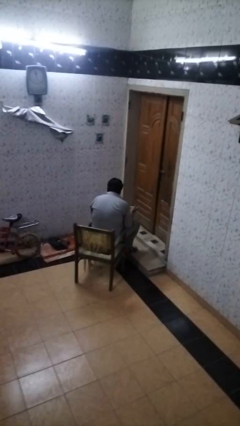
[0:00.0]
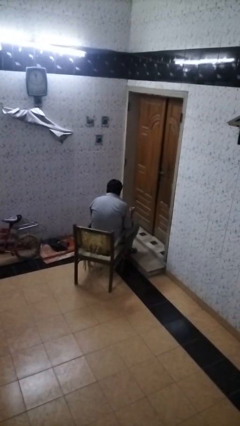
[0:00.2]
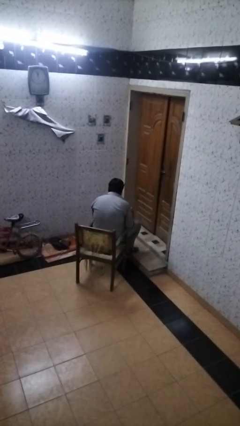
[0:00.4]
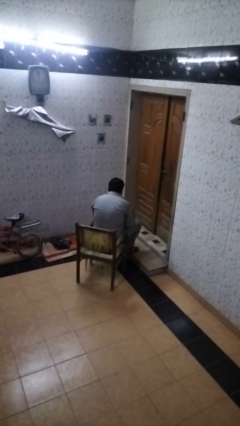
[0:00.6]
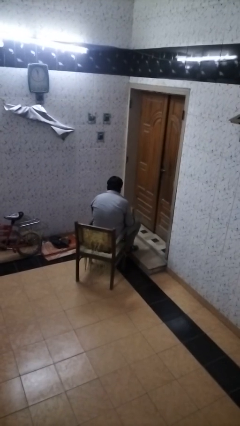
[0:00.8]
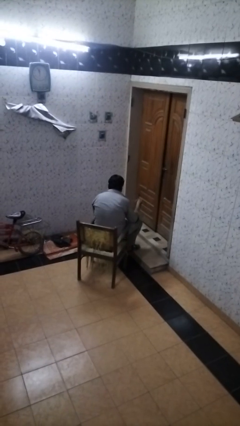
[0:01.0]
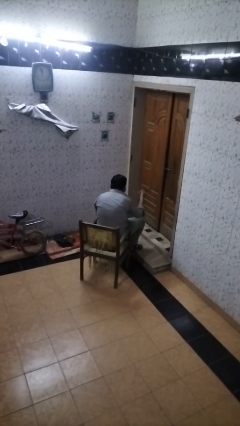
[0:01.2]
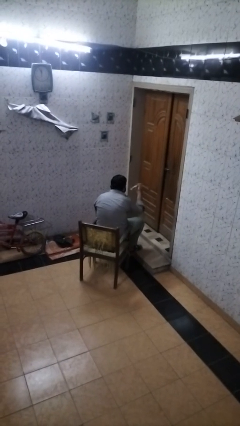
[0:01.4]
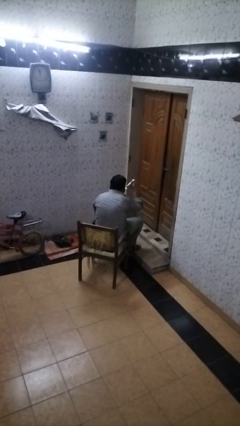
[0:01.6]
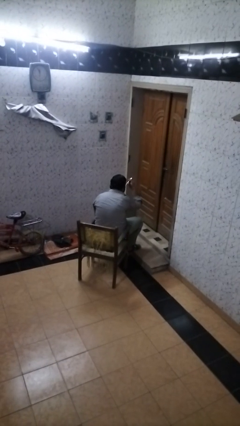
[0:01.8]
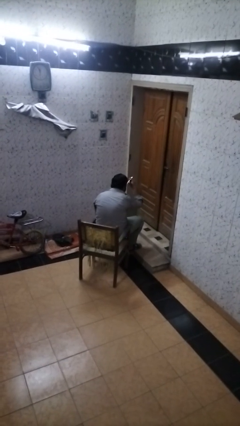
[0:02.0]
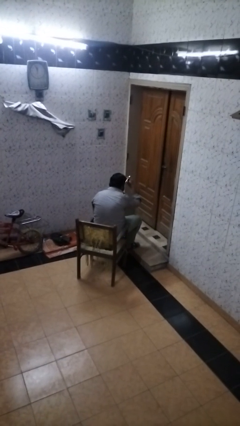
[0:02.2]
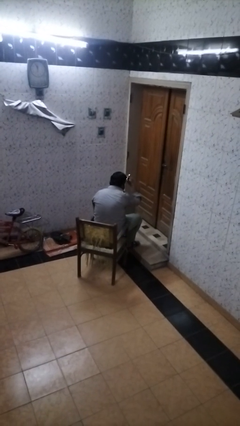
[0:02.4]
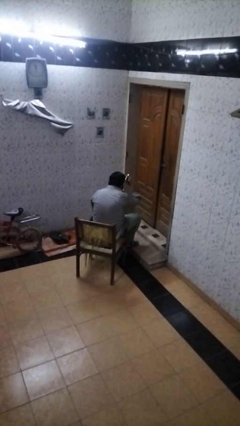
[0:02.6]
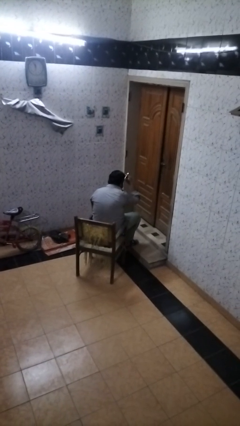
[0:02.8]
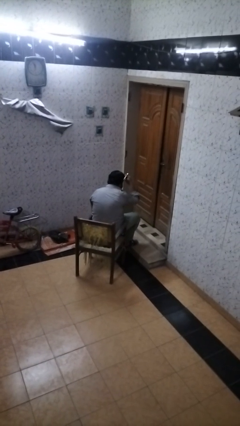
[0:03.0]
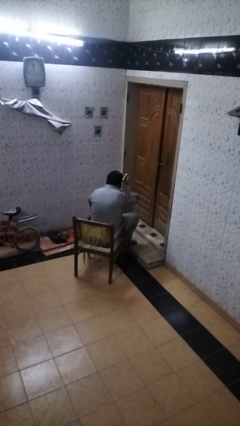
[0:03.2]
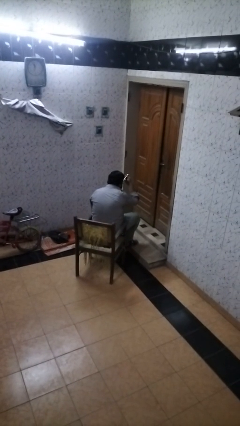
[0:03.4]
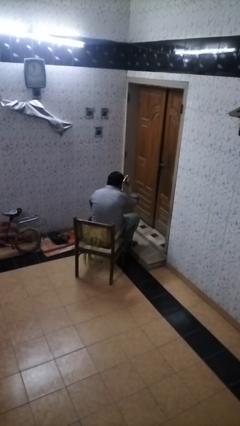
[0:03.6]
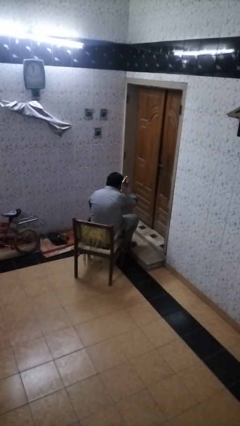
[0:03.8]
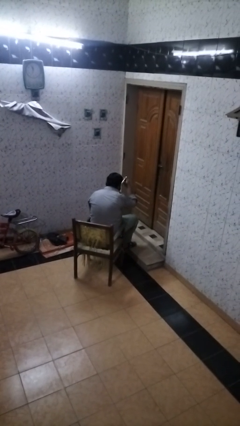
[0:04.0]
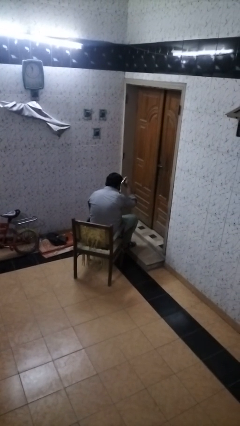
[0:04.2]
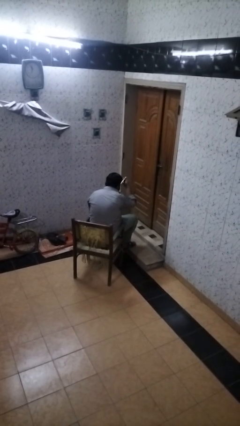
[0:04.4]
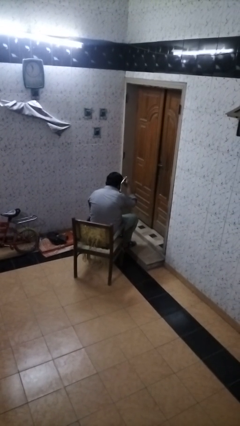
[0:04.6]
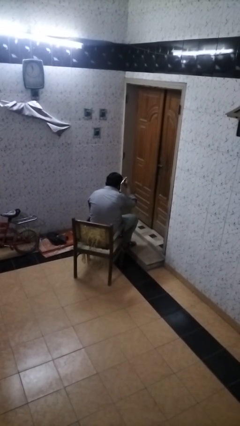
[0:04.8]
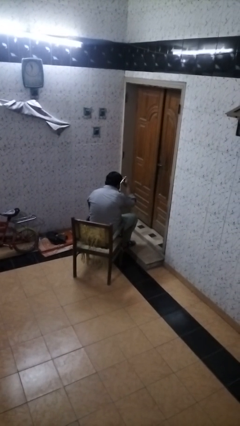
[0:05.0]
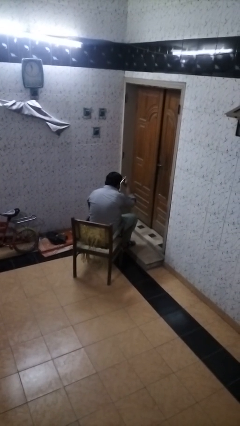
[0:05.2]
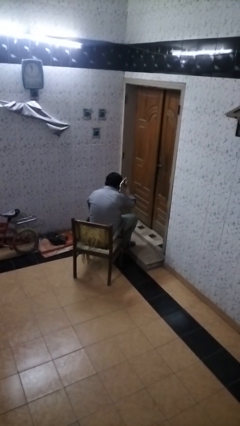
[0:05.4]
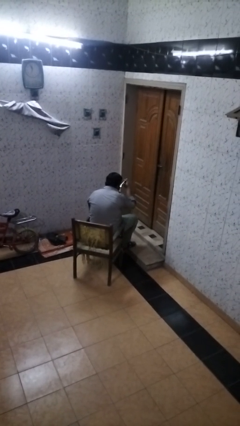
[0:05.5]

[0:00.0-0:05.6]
person eats with utensil

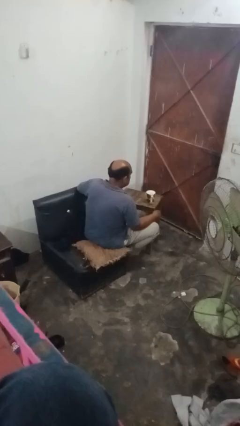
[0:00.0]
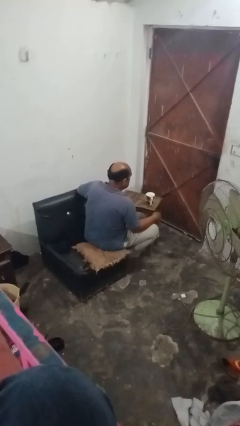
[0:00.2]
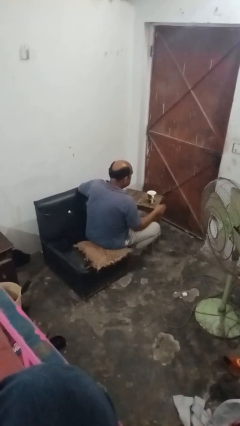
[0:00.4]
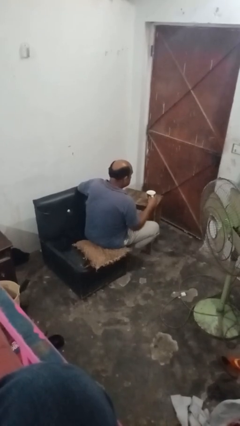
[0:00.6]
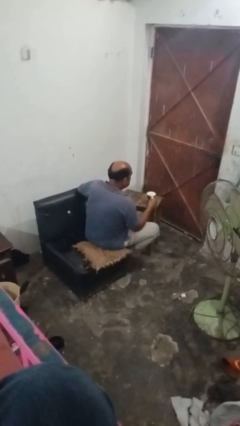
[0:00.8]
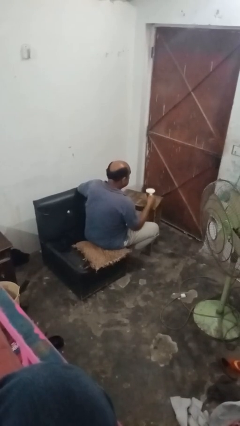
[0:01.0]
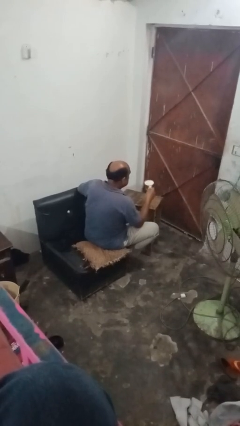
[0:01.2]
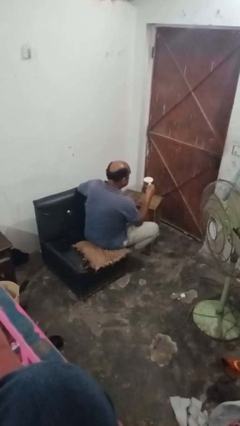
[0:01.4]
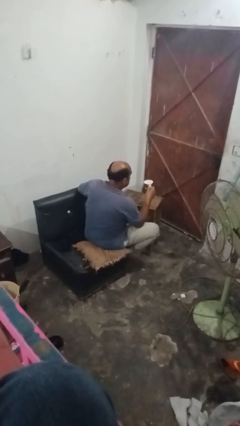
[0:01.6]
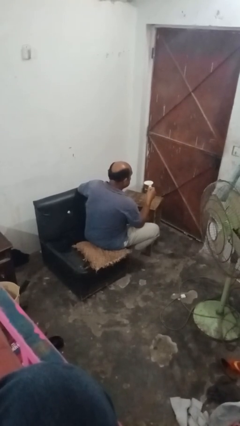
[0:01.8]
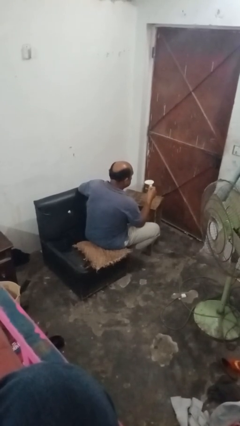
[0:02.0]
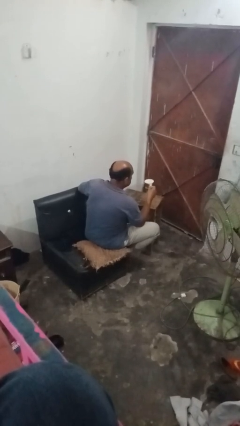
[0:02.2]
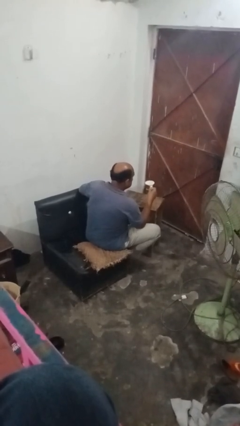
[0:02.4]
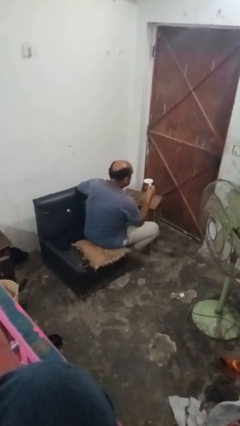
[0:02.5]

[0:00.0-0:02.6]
person picks up object from table

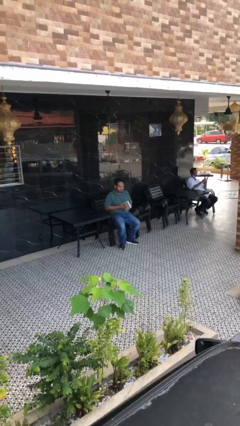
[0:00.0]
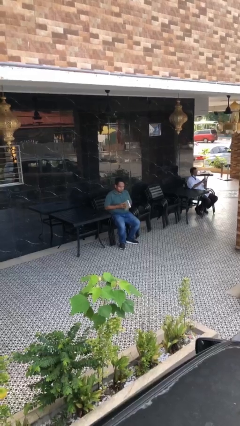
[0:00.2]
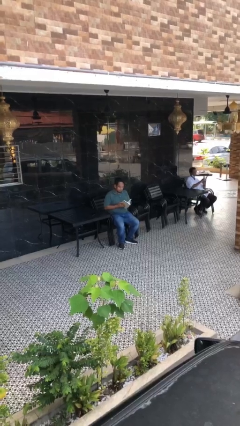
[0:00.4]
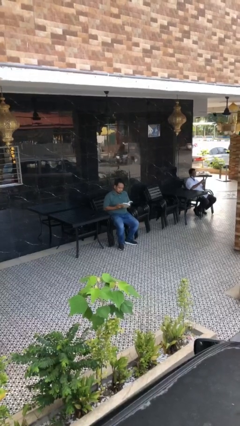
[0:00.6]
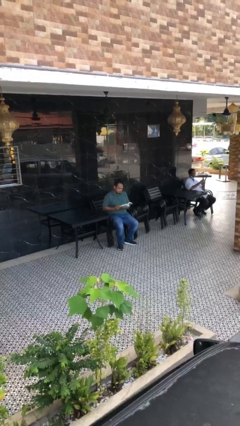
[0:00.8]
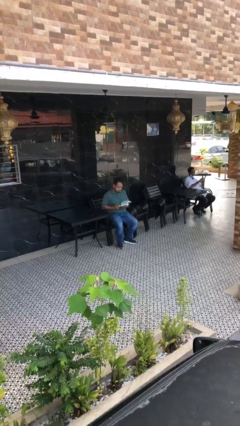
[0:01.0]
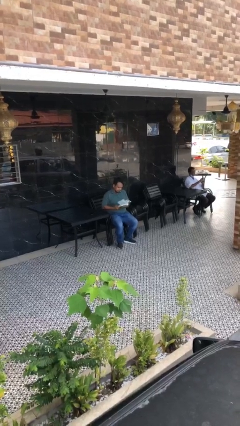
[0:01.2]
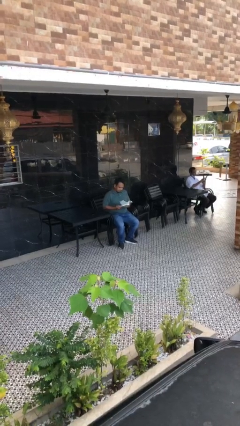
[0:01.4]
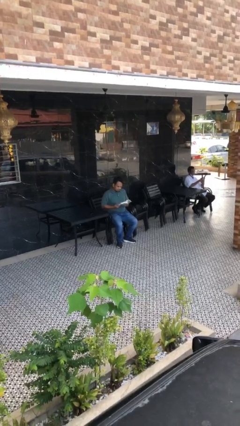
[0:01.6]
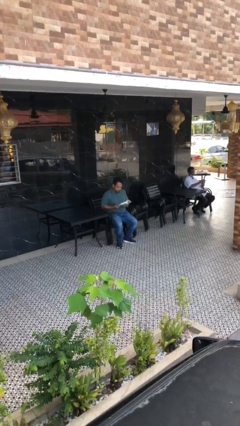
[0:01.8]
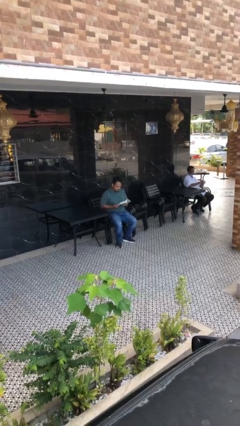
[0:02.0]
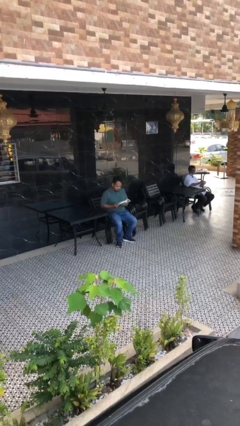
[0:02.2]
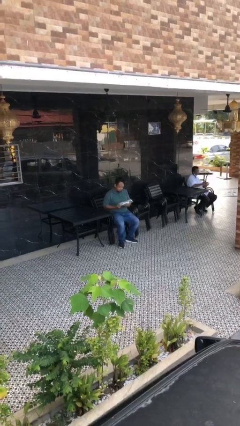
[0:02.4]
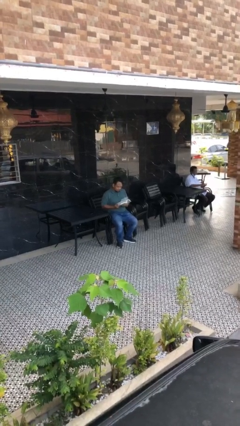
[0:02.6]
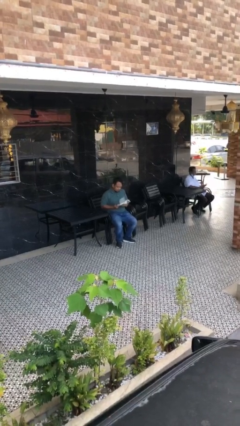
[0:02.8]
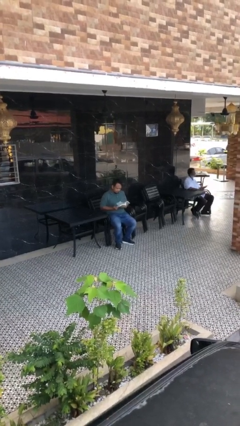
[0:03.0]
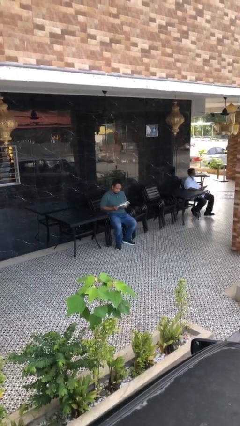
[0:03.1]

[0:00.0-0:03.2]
person reads document

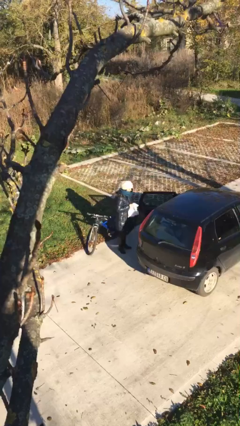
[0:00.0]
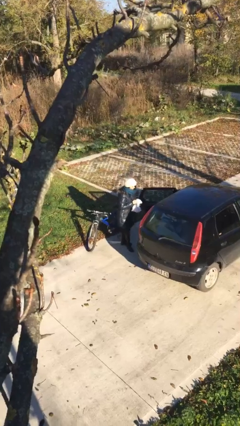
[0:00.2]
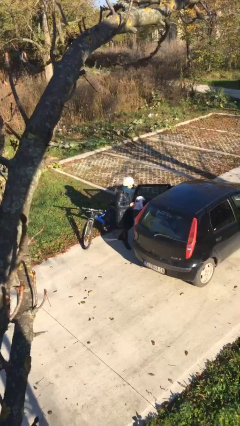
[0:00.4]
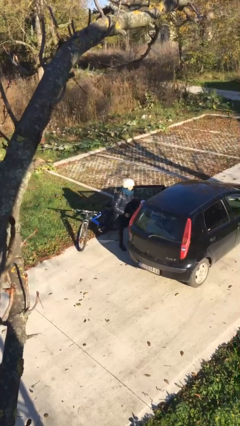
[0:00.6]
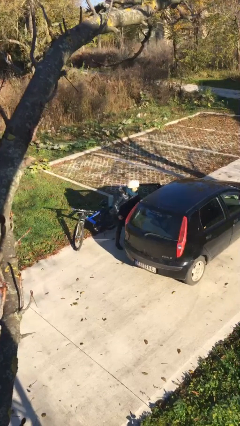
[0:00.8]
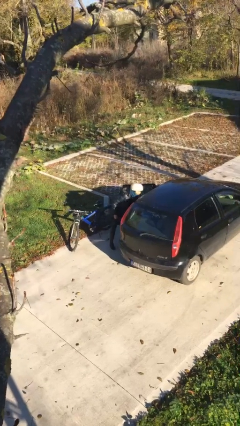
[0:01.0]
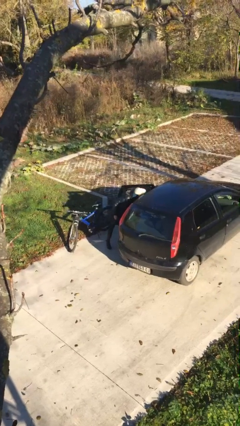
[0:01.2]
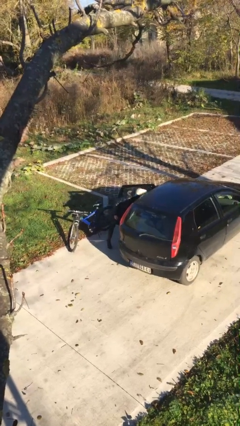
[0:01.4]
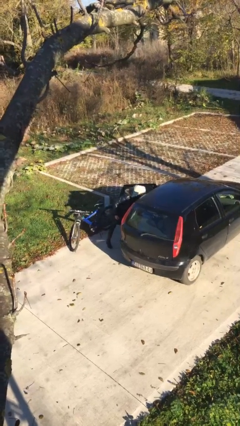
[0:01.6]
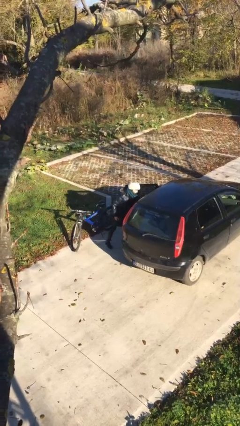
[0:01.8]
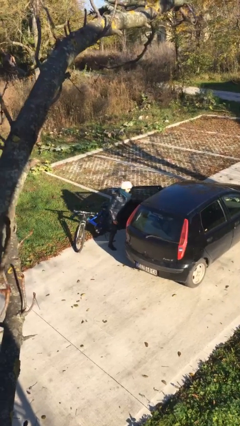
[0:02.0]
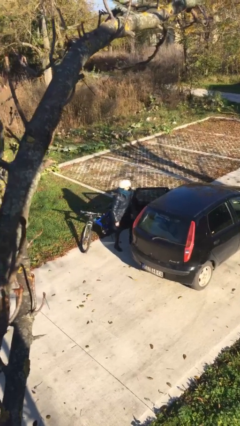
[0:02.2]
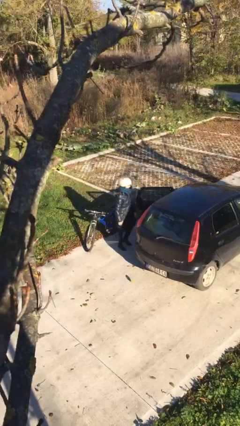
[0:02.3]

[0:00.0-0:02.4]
person loads car

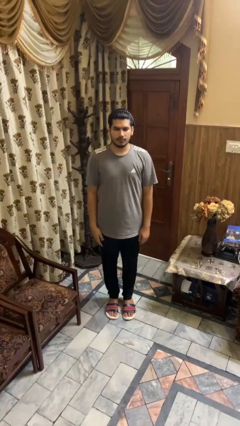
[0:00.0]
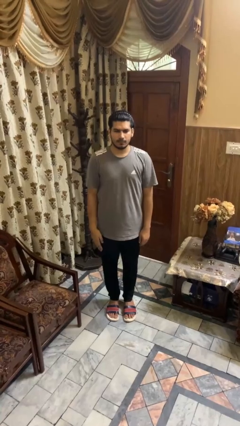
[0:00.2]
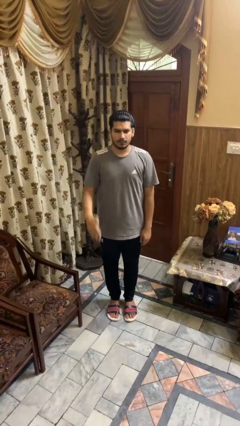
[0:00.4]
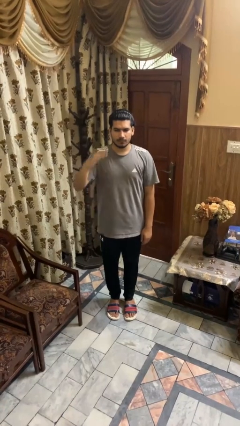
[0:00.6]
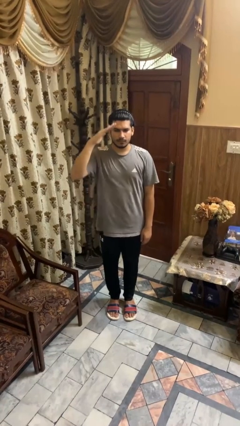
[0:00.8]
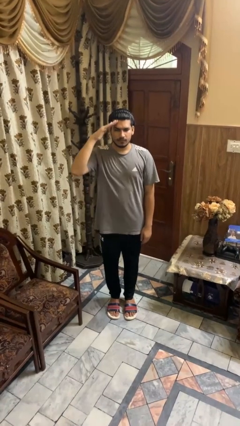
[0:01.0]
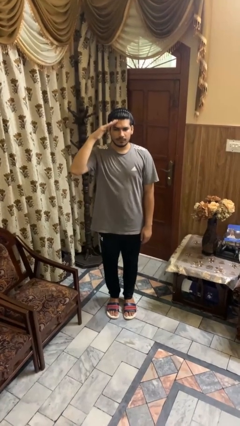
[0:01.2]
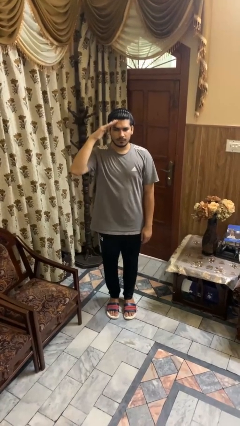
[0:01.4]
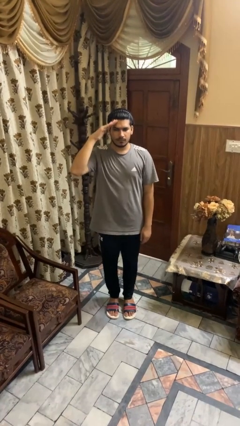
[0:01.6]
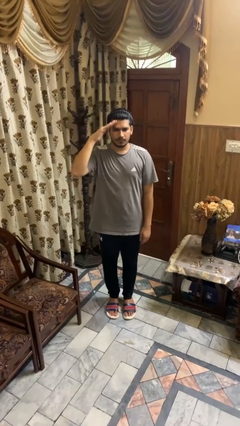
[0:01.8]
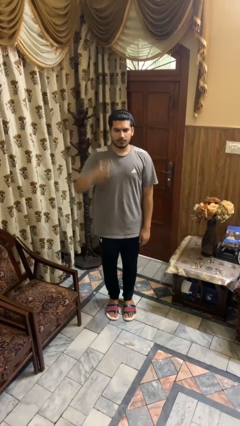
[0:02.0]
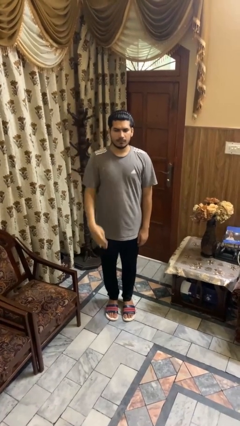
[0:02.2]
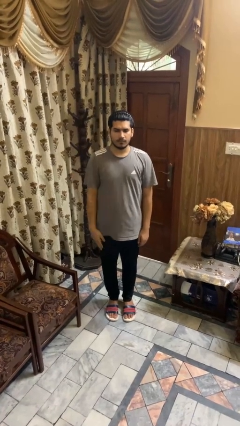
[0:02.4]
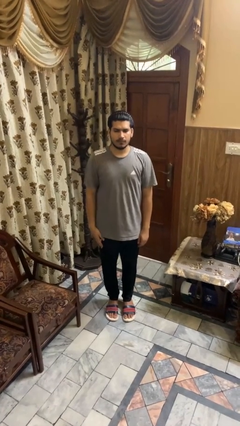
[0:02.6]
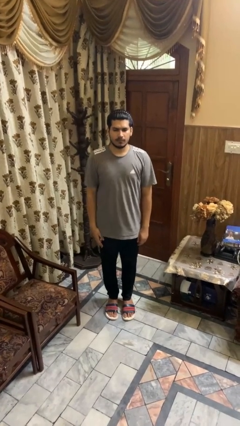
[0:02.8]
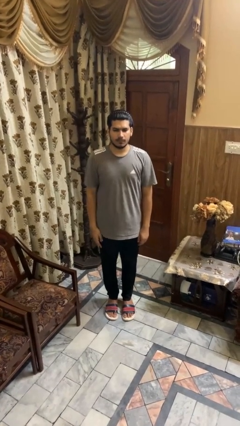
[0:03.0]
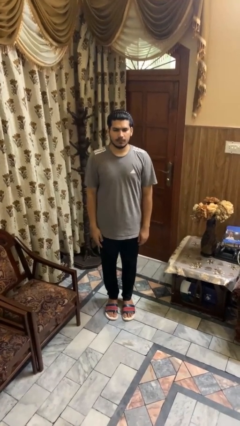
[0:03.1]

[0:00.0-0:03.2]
person salutes

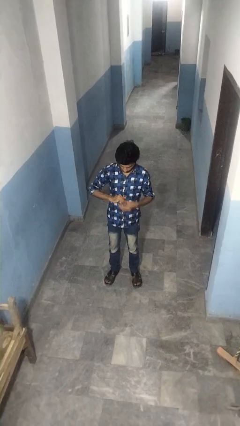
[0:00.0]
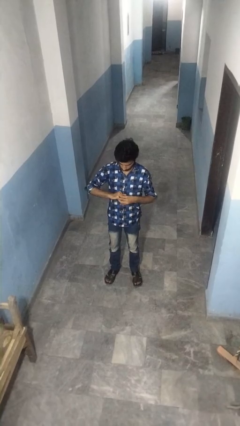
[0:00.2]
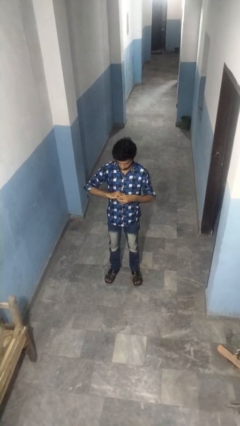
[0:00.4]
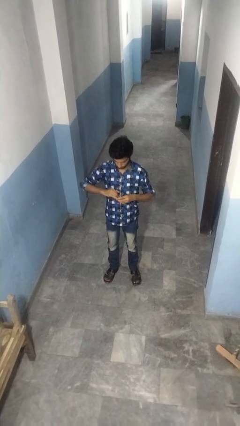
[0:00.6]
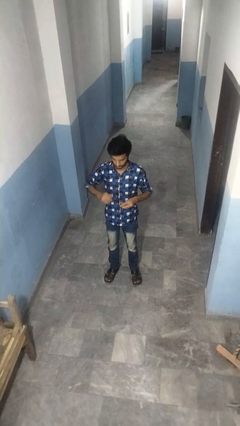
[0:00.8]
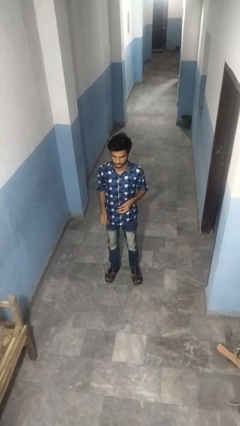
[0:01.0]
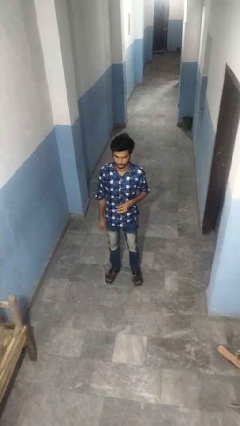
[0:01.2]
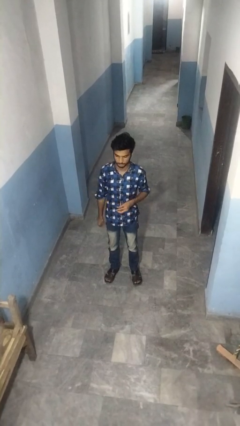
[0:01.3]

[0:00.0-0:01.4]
person takes off ring
